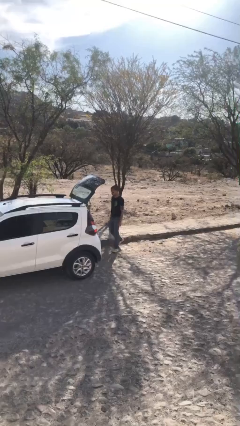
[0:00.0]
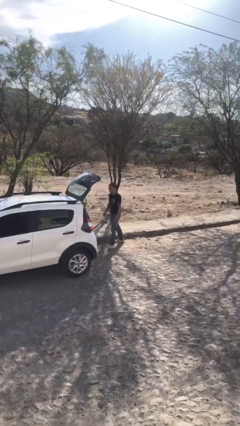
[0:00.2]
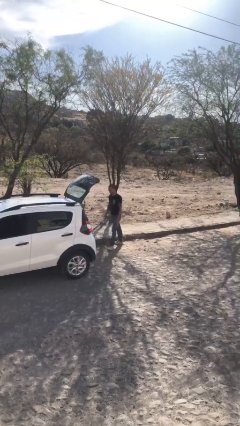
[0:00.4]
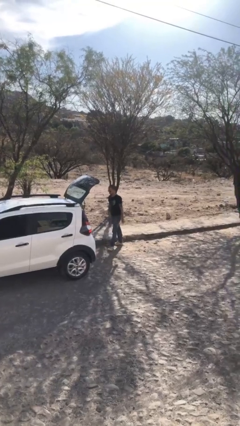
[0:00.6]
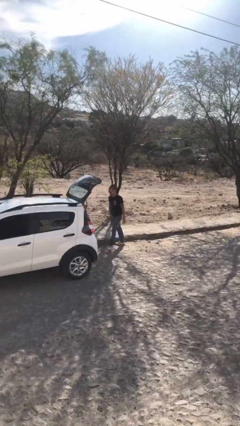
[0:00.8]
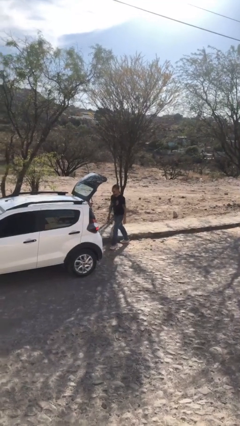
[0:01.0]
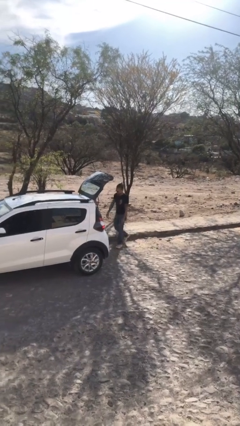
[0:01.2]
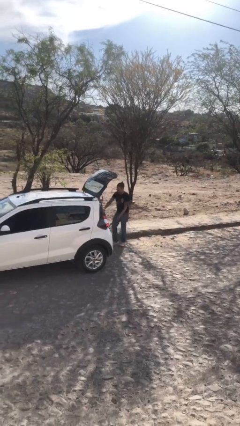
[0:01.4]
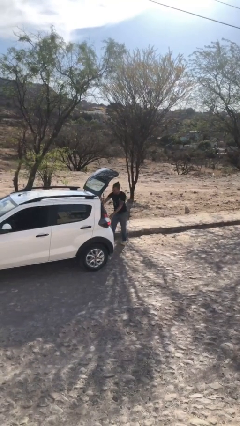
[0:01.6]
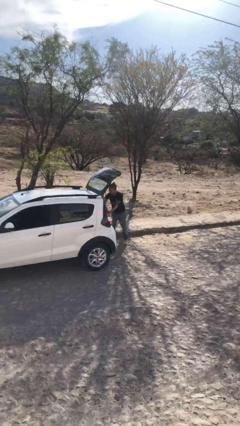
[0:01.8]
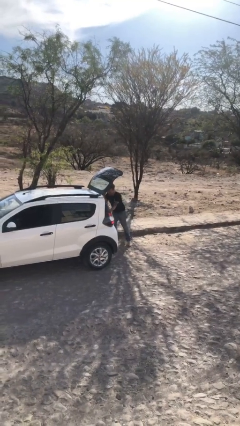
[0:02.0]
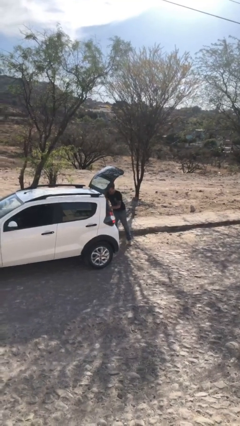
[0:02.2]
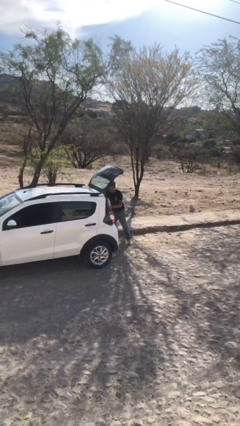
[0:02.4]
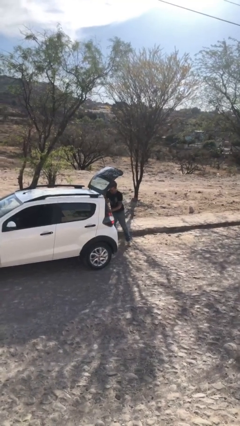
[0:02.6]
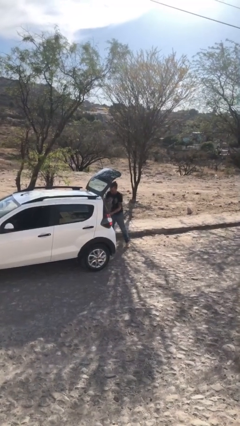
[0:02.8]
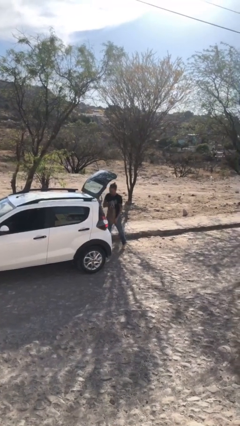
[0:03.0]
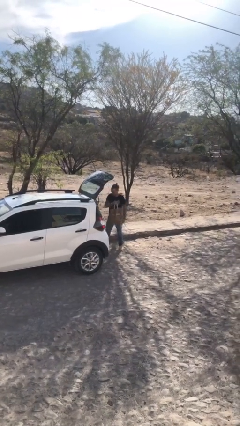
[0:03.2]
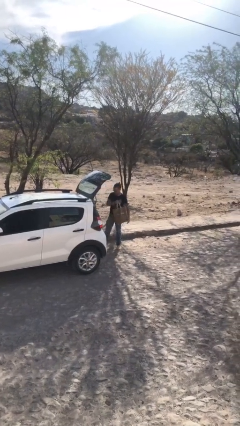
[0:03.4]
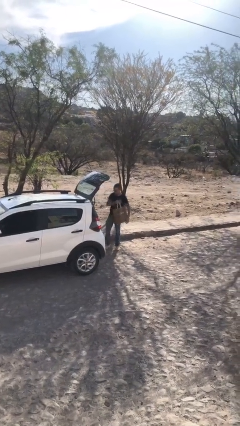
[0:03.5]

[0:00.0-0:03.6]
person unloads car

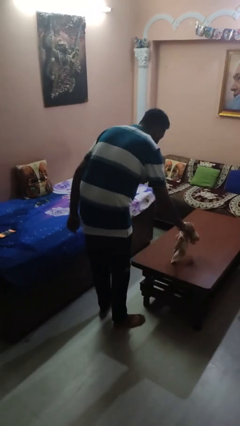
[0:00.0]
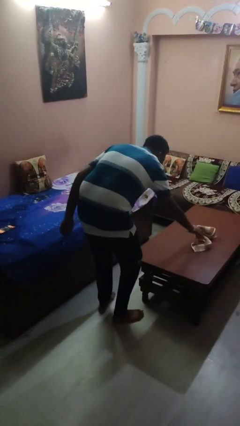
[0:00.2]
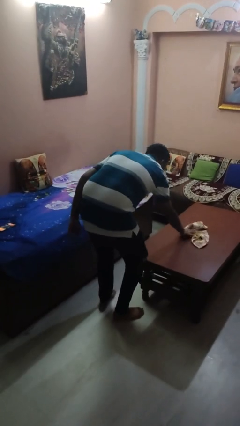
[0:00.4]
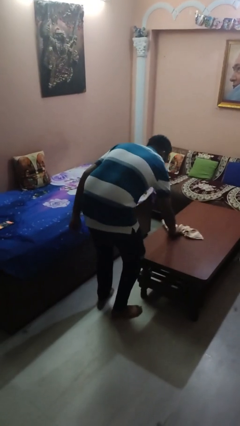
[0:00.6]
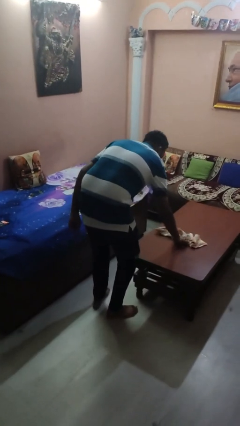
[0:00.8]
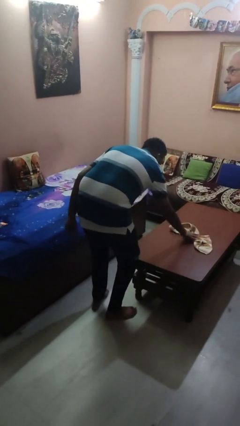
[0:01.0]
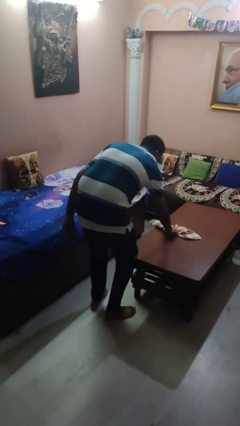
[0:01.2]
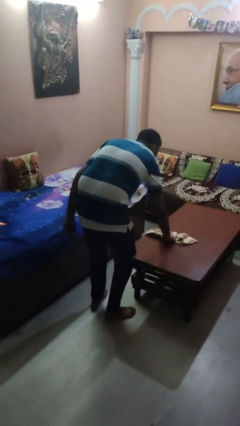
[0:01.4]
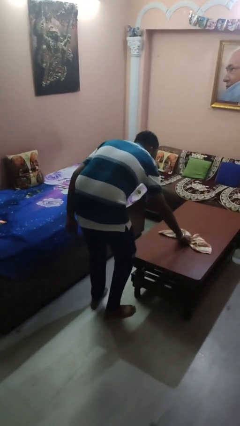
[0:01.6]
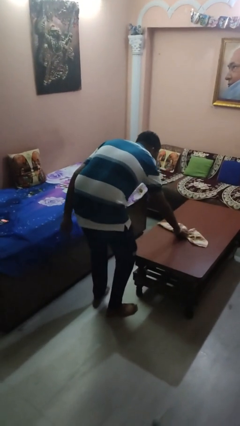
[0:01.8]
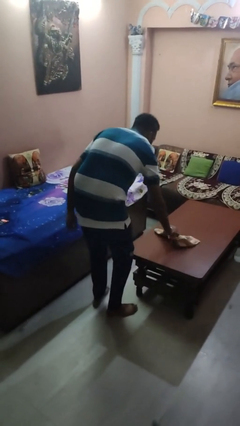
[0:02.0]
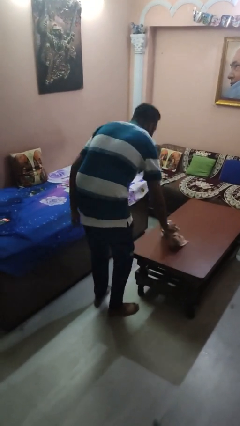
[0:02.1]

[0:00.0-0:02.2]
person cleans table with rag

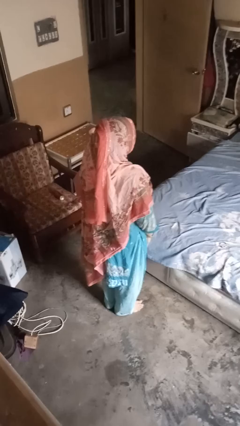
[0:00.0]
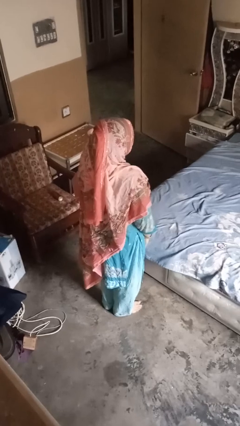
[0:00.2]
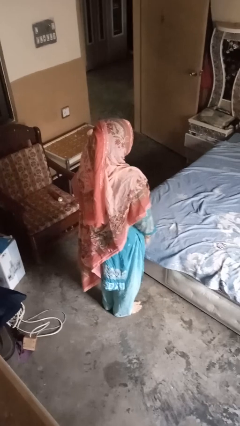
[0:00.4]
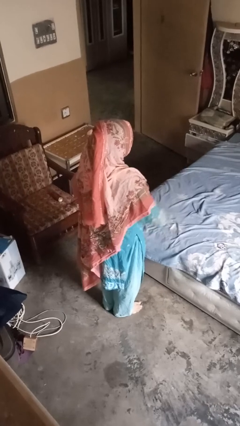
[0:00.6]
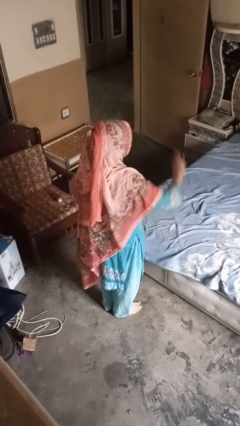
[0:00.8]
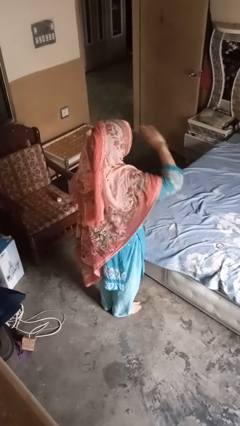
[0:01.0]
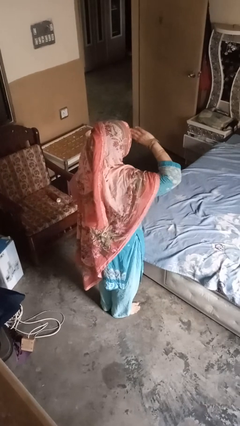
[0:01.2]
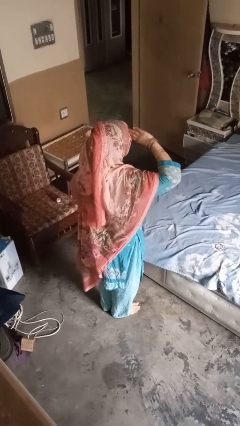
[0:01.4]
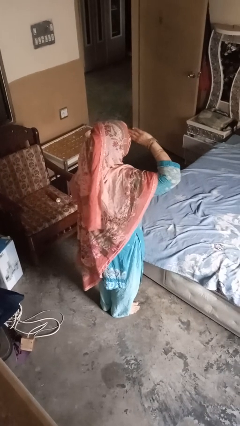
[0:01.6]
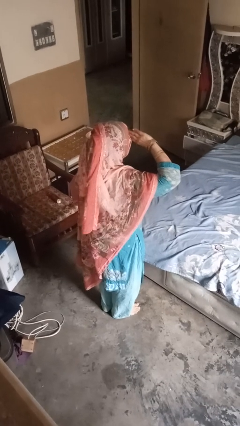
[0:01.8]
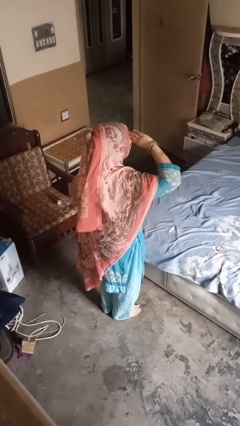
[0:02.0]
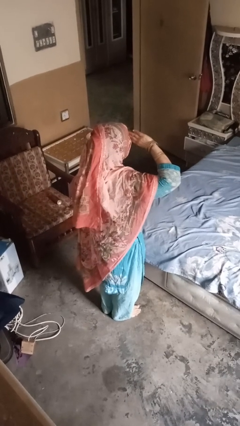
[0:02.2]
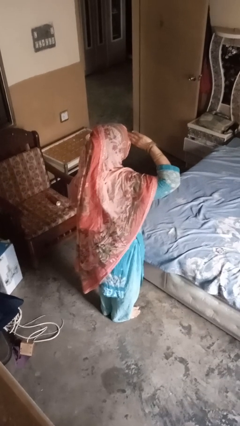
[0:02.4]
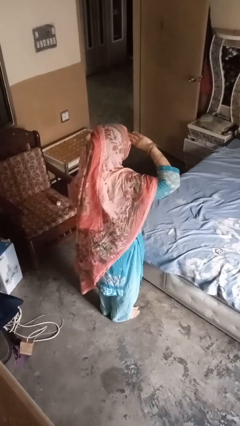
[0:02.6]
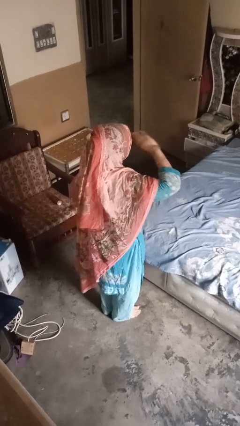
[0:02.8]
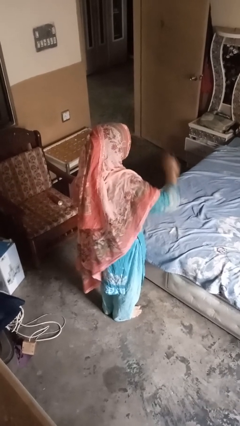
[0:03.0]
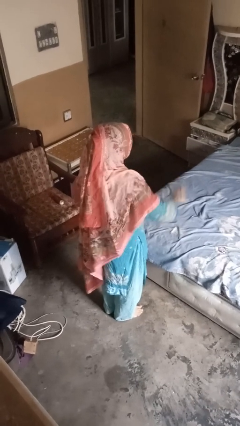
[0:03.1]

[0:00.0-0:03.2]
person salutes

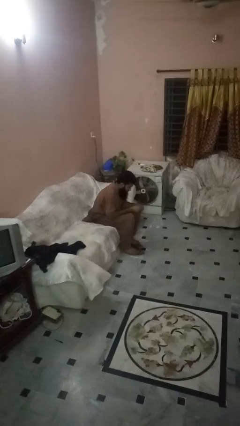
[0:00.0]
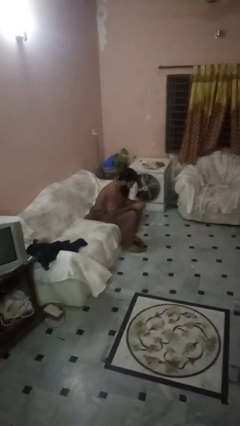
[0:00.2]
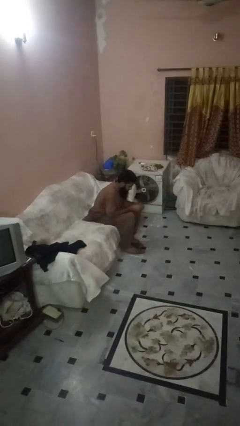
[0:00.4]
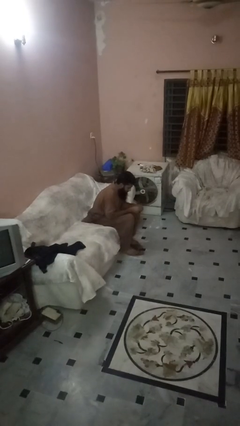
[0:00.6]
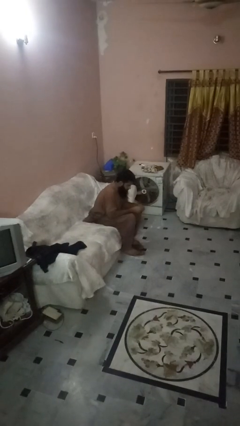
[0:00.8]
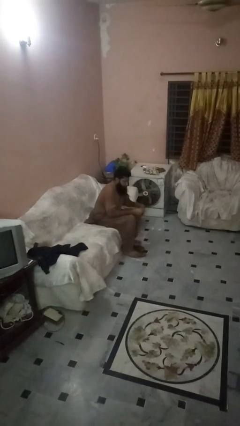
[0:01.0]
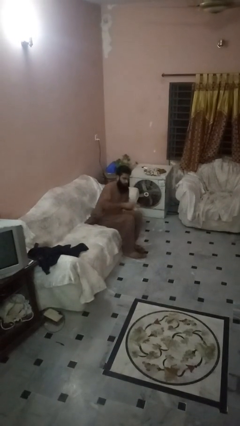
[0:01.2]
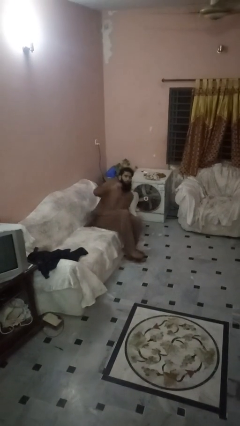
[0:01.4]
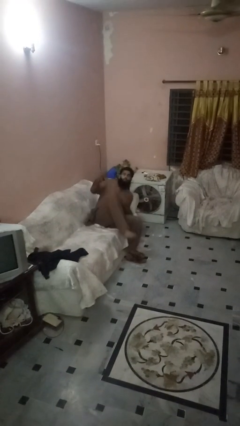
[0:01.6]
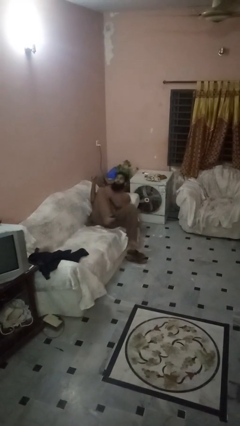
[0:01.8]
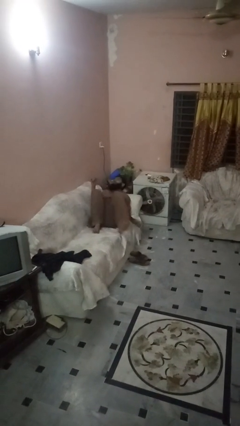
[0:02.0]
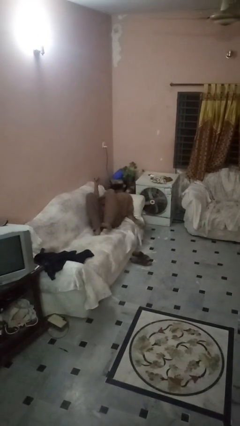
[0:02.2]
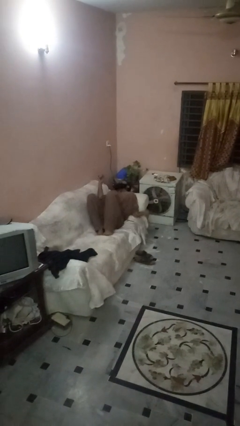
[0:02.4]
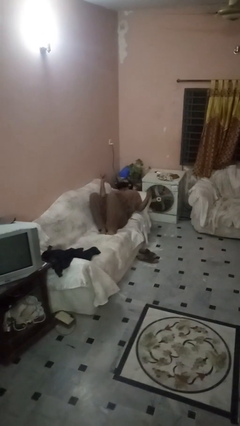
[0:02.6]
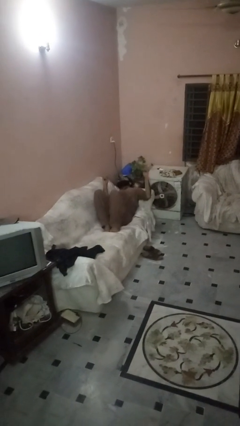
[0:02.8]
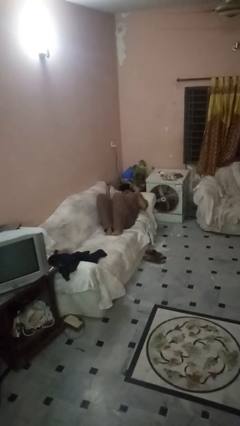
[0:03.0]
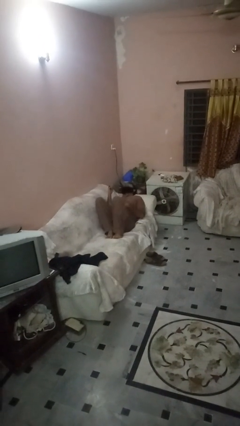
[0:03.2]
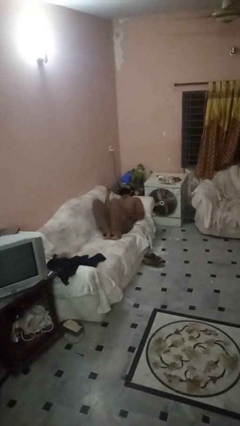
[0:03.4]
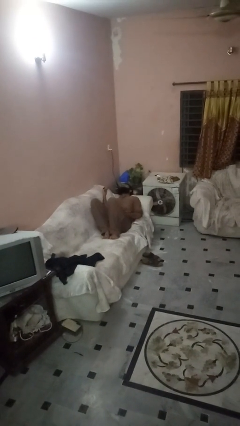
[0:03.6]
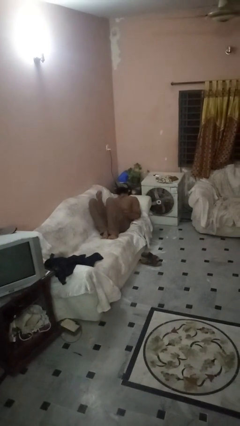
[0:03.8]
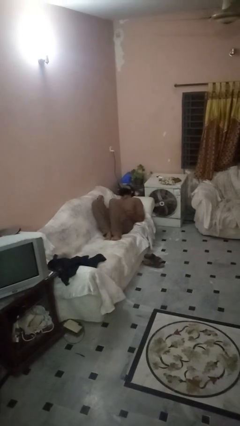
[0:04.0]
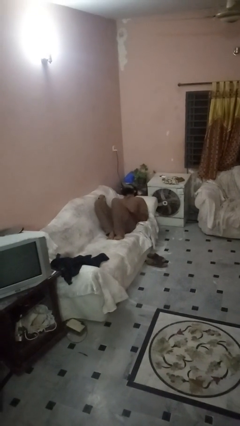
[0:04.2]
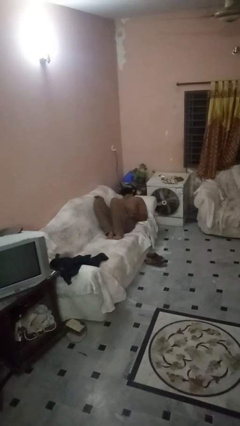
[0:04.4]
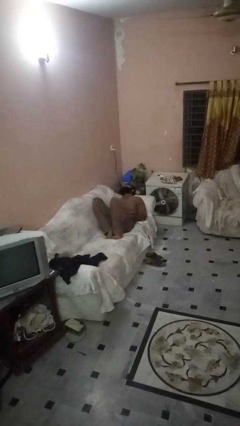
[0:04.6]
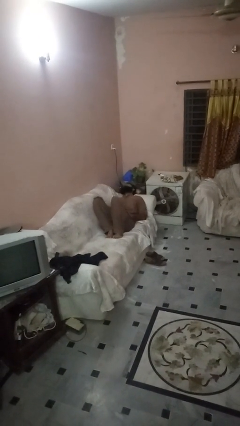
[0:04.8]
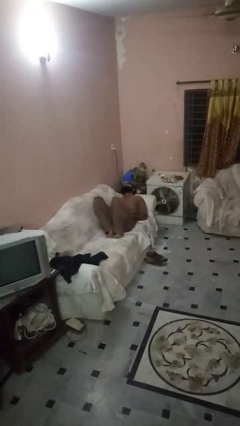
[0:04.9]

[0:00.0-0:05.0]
person lies down on couch

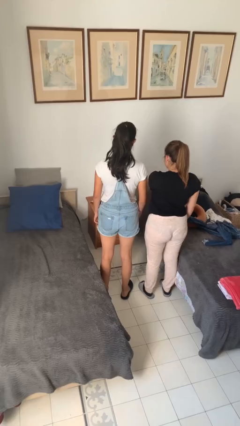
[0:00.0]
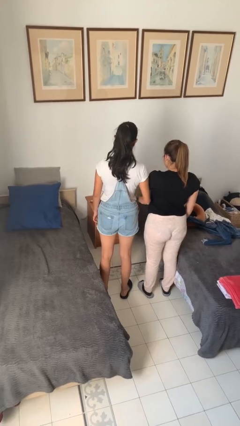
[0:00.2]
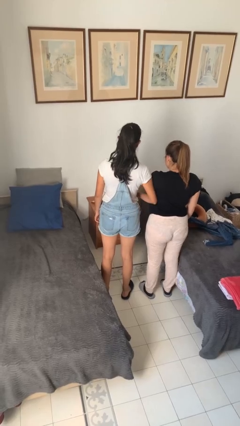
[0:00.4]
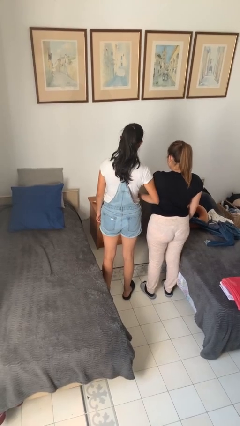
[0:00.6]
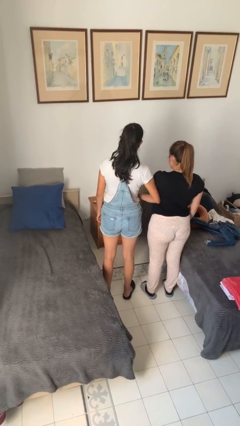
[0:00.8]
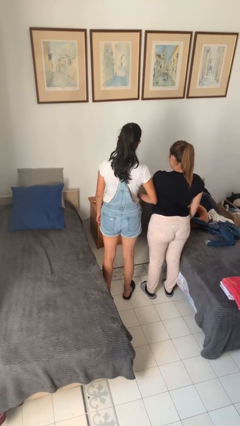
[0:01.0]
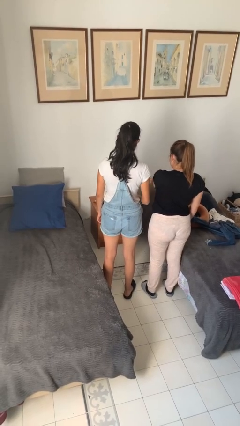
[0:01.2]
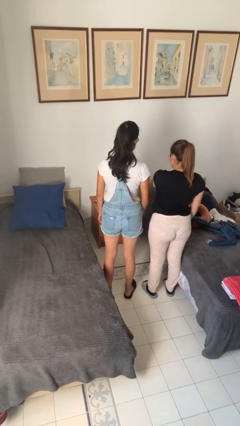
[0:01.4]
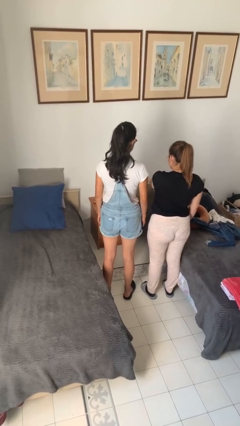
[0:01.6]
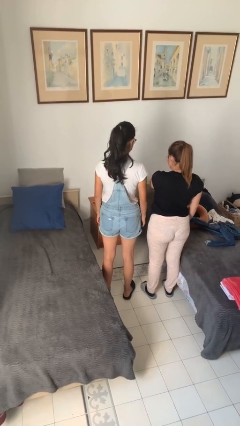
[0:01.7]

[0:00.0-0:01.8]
person nudges person with elbow

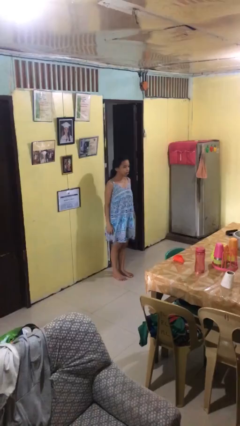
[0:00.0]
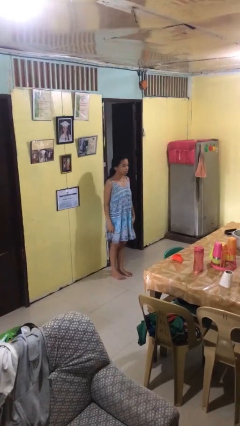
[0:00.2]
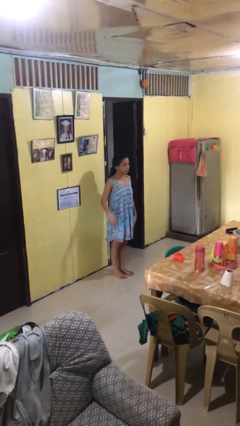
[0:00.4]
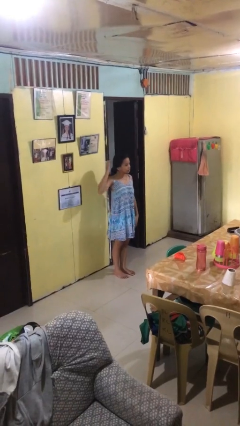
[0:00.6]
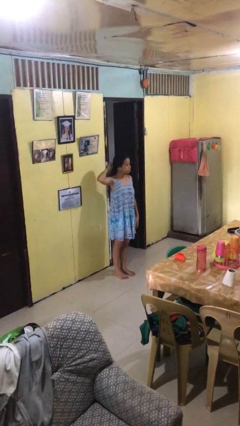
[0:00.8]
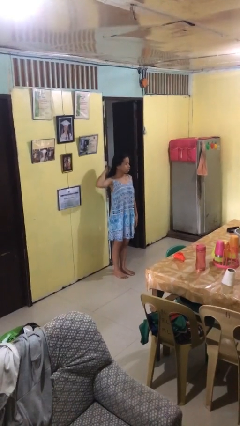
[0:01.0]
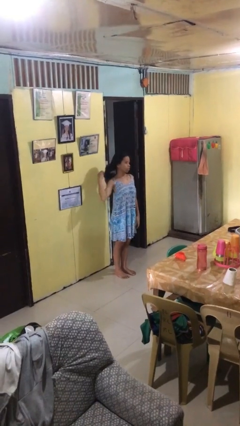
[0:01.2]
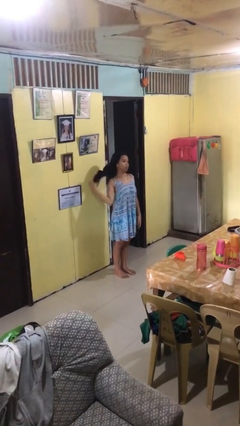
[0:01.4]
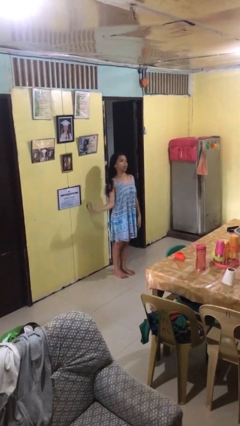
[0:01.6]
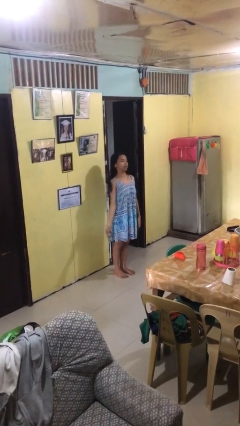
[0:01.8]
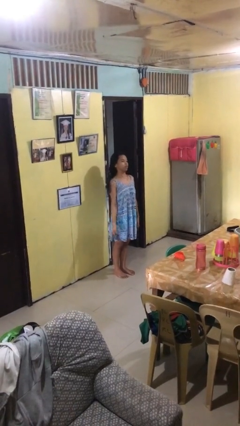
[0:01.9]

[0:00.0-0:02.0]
person takes off hairtie
